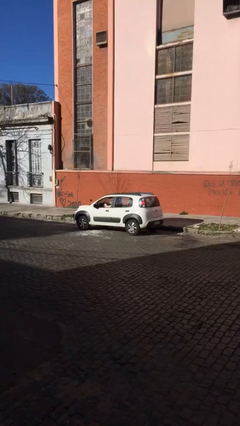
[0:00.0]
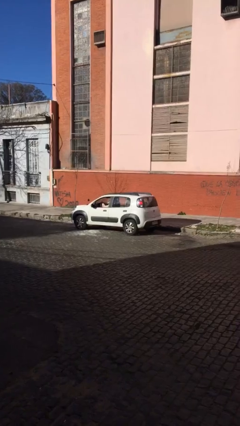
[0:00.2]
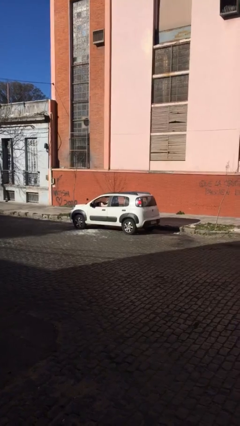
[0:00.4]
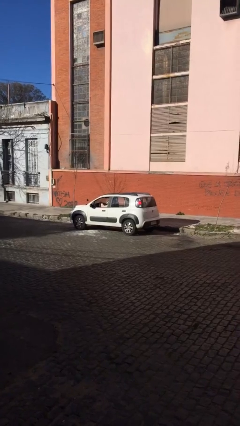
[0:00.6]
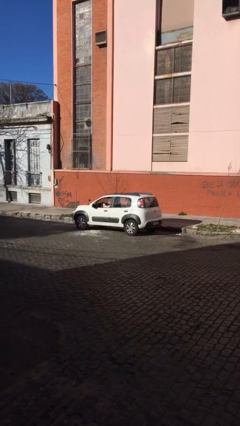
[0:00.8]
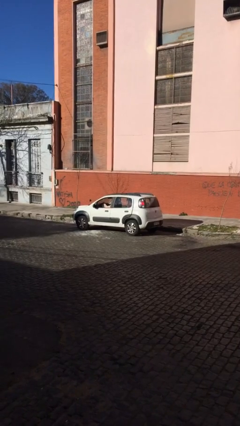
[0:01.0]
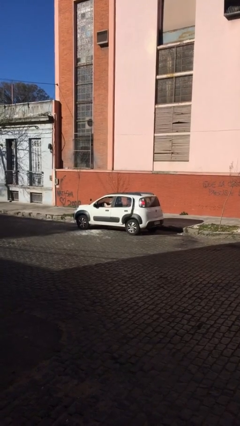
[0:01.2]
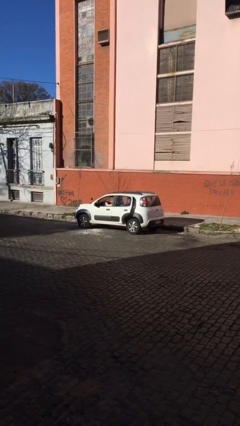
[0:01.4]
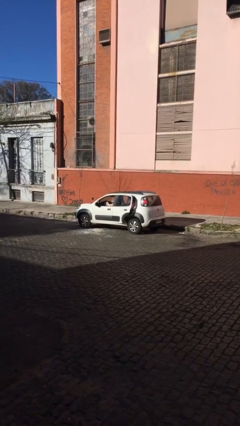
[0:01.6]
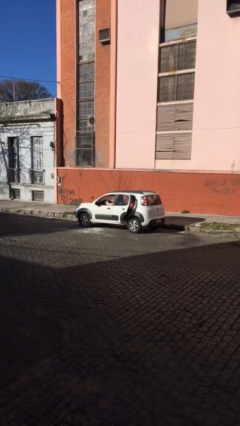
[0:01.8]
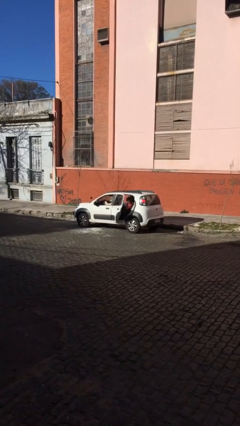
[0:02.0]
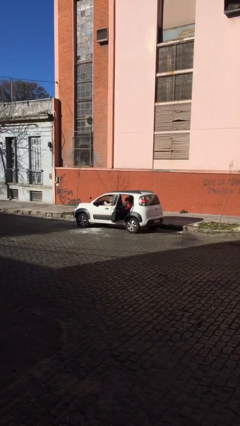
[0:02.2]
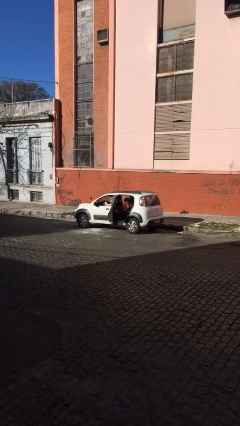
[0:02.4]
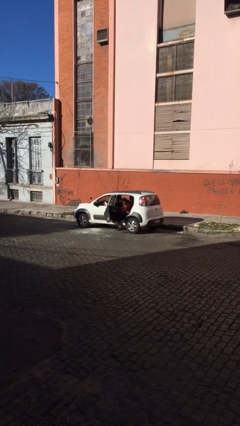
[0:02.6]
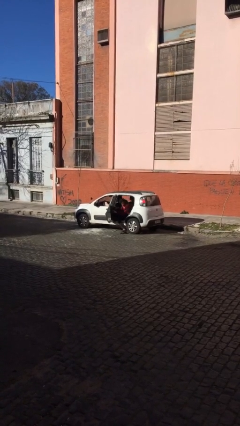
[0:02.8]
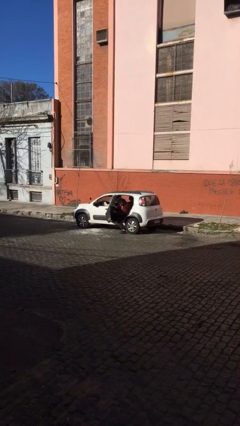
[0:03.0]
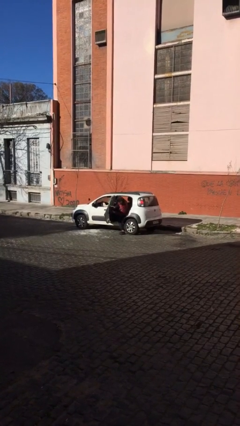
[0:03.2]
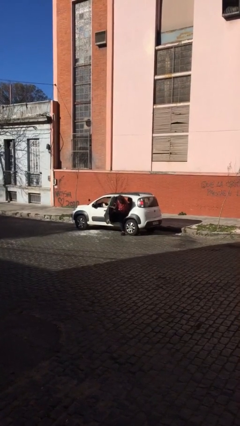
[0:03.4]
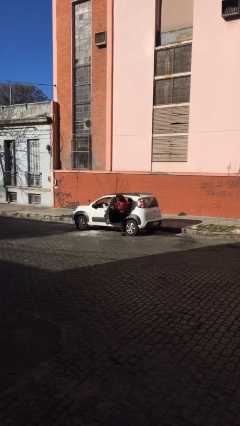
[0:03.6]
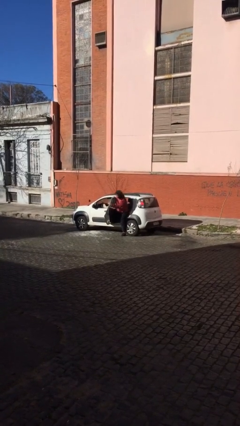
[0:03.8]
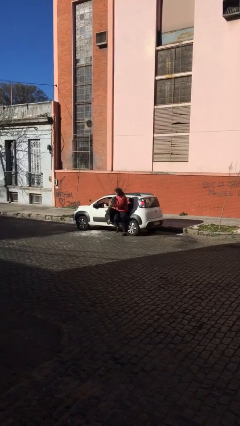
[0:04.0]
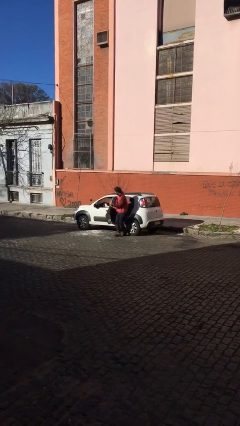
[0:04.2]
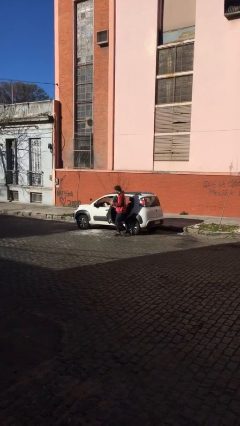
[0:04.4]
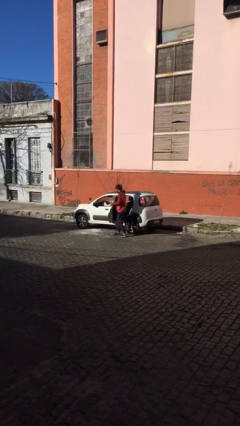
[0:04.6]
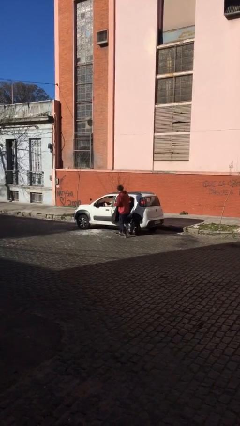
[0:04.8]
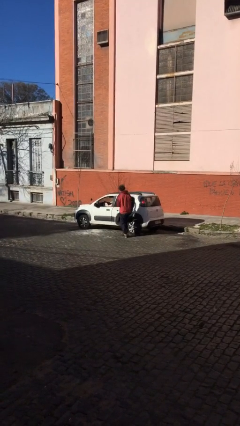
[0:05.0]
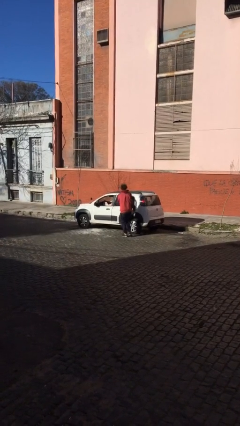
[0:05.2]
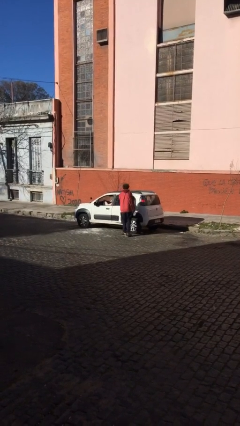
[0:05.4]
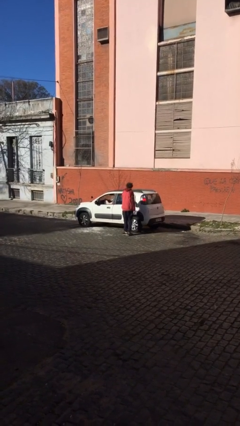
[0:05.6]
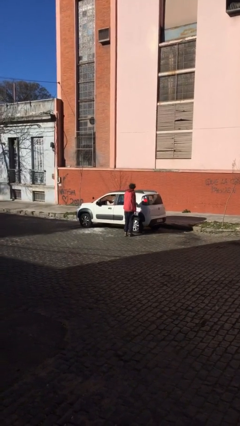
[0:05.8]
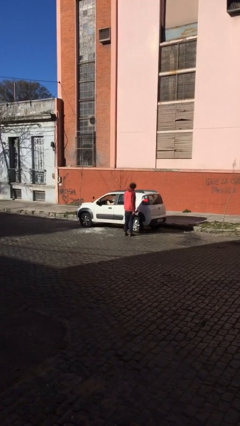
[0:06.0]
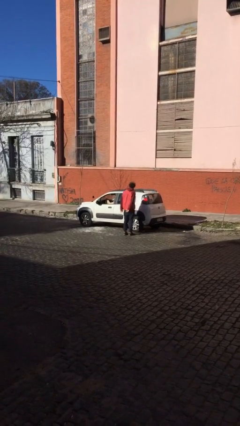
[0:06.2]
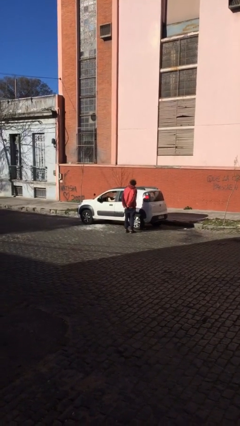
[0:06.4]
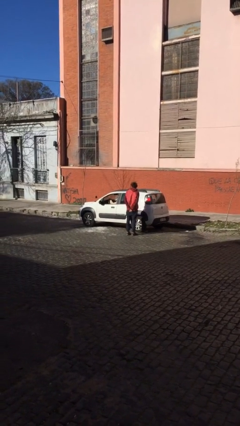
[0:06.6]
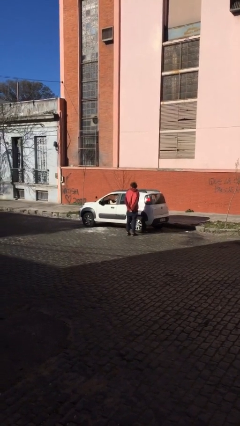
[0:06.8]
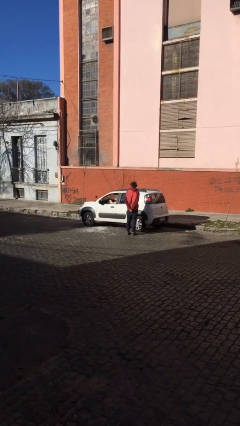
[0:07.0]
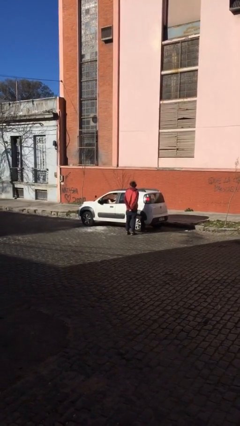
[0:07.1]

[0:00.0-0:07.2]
car drops off person

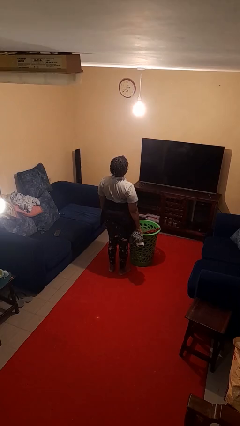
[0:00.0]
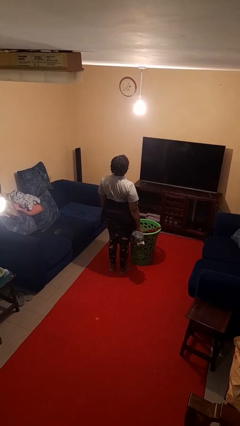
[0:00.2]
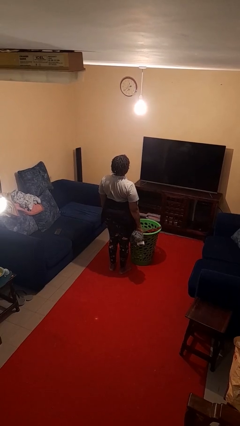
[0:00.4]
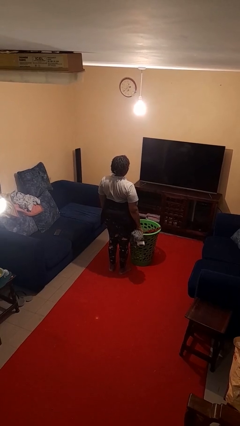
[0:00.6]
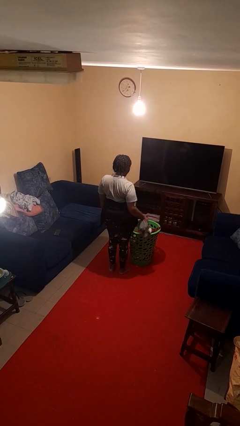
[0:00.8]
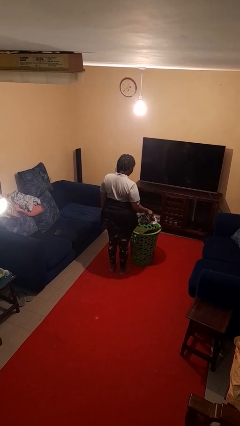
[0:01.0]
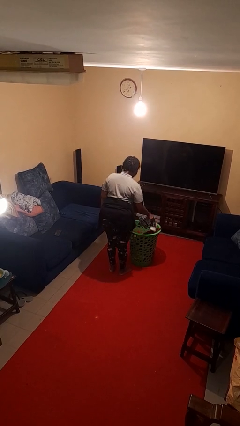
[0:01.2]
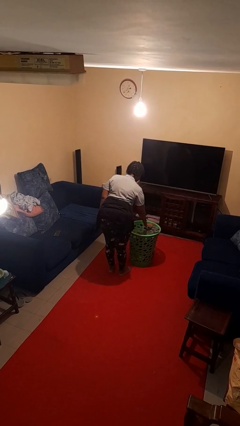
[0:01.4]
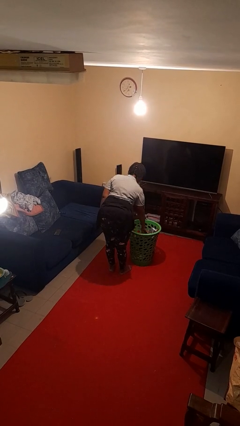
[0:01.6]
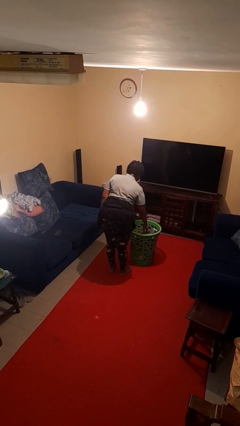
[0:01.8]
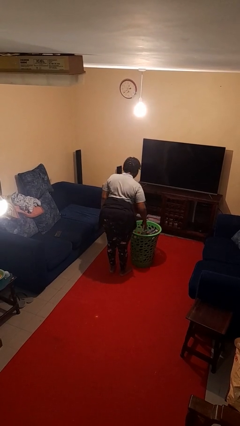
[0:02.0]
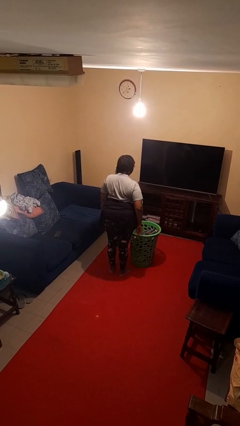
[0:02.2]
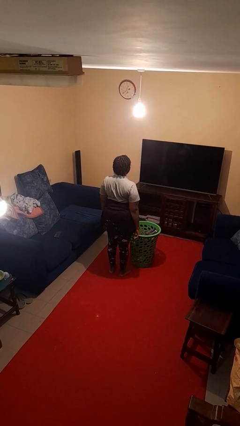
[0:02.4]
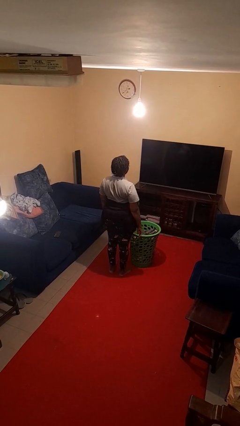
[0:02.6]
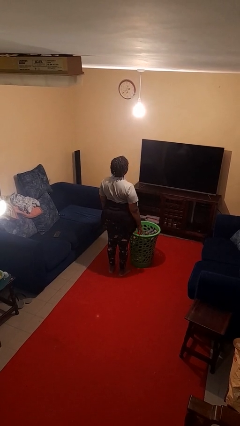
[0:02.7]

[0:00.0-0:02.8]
person puts object into basket

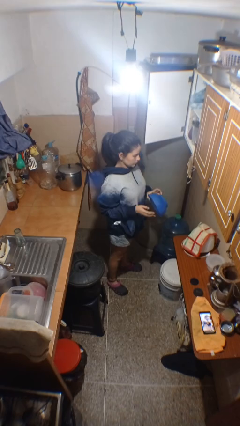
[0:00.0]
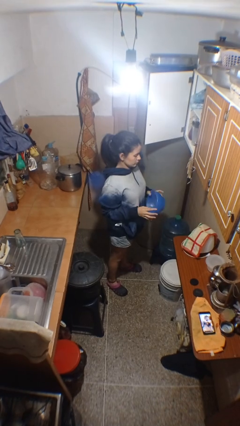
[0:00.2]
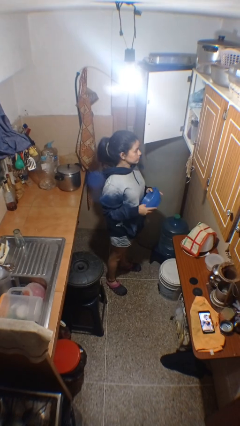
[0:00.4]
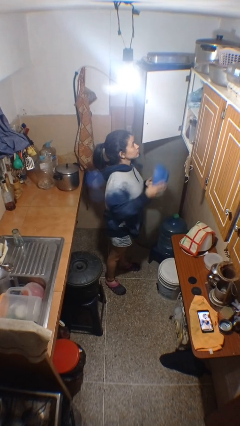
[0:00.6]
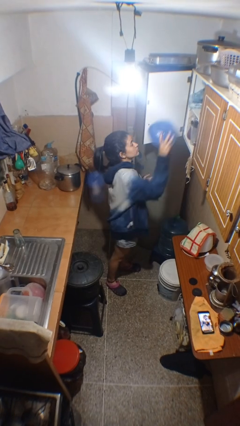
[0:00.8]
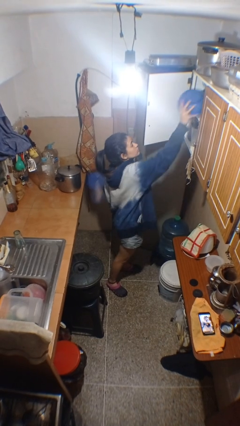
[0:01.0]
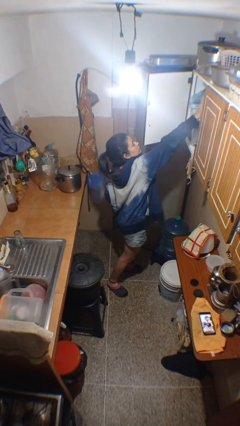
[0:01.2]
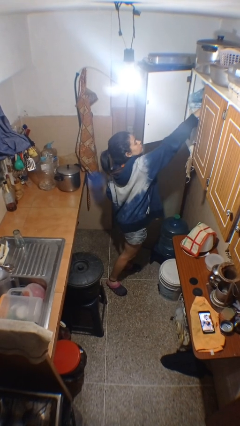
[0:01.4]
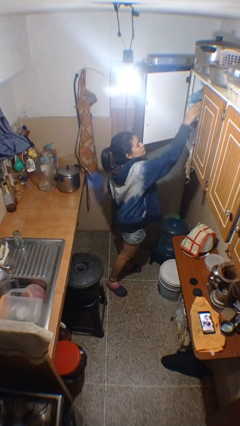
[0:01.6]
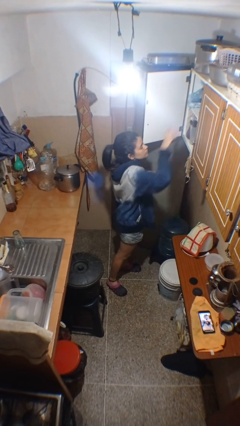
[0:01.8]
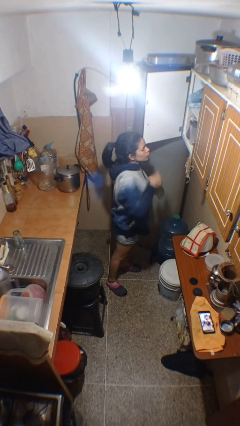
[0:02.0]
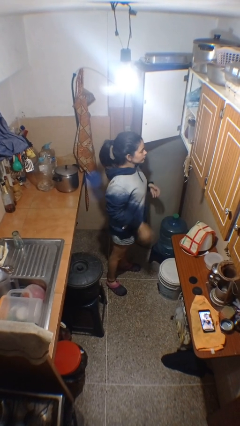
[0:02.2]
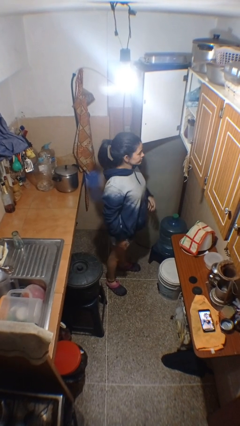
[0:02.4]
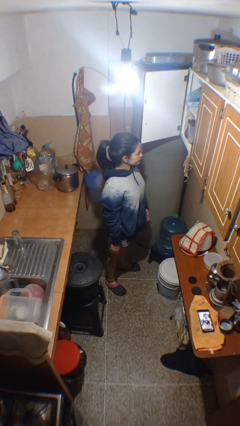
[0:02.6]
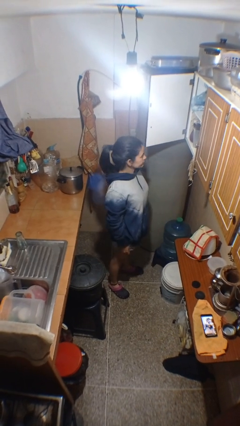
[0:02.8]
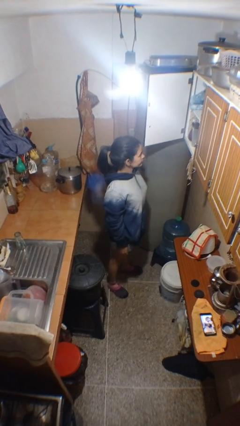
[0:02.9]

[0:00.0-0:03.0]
person puts down object into cabinet

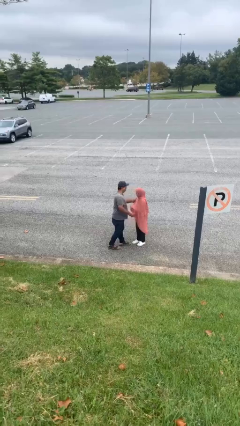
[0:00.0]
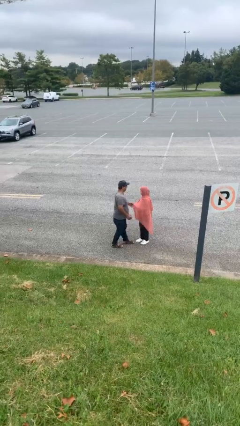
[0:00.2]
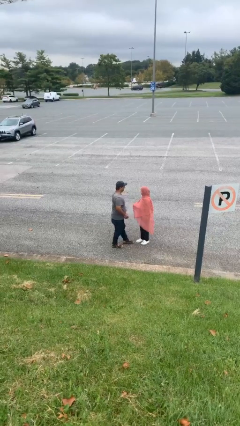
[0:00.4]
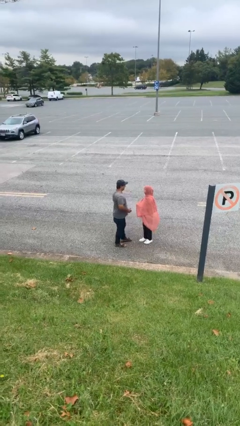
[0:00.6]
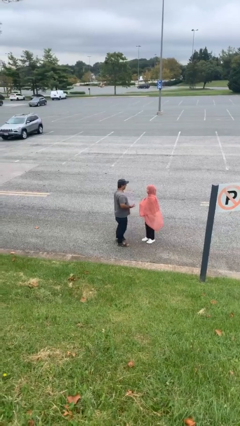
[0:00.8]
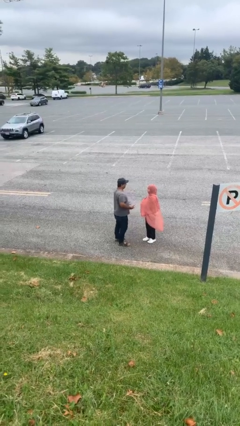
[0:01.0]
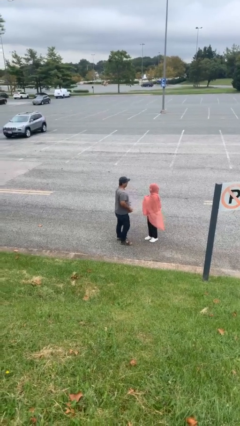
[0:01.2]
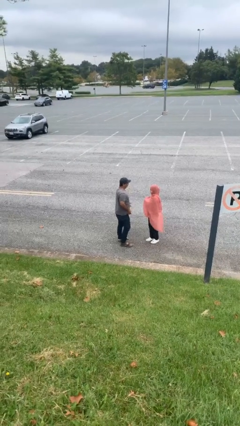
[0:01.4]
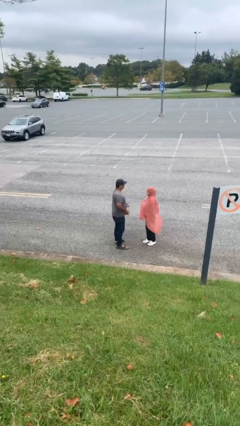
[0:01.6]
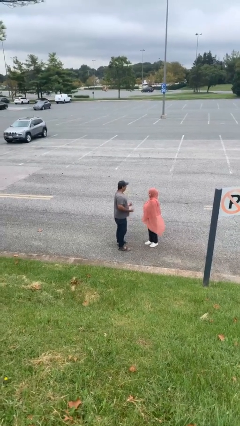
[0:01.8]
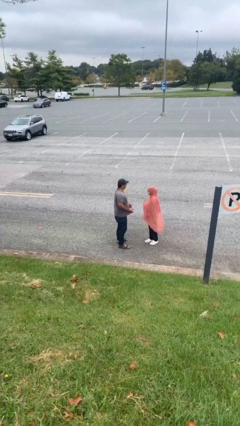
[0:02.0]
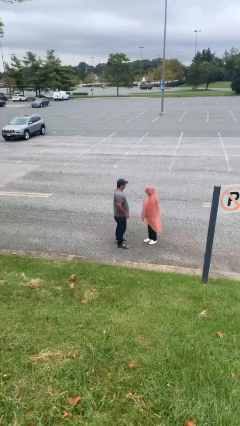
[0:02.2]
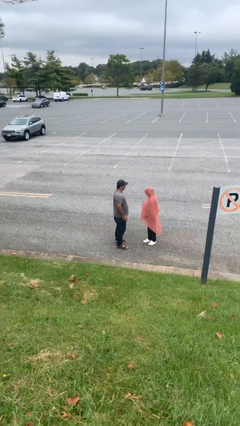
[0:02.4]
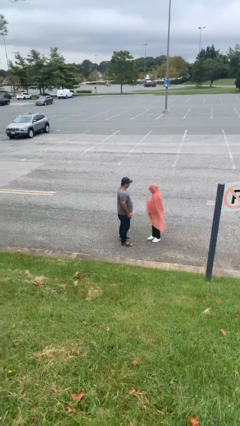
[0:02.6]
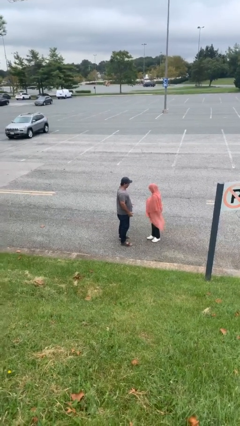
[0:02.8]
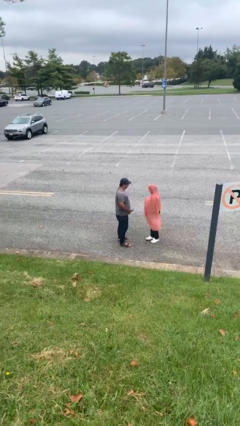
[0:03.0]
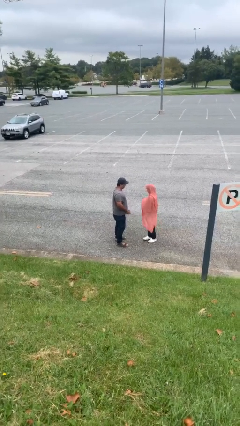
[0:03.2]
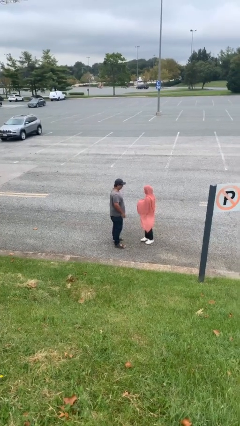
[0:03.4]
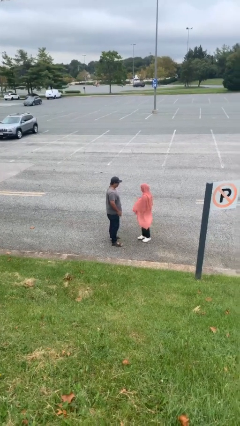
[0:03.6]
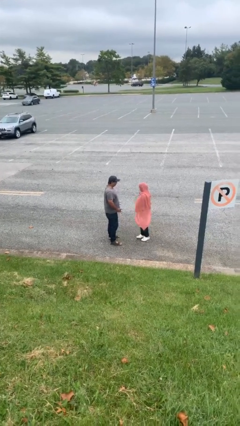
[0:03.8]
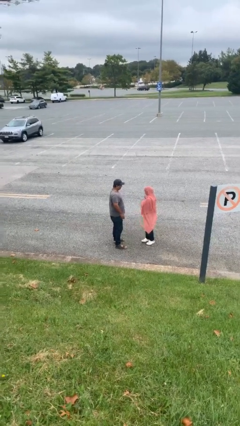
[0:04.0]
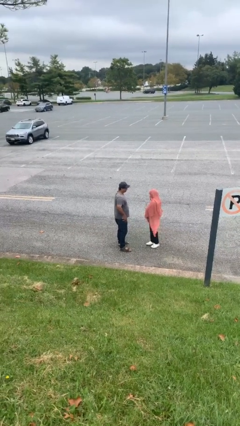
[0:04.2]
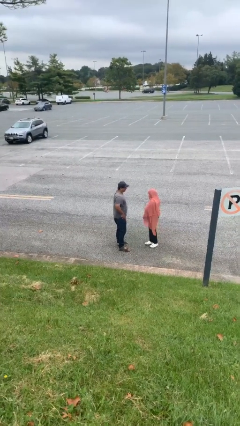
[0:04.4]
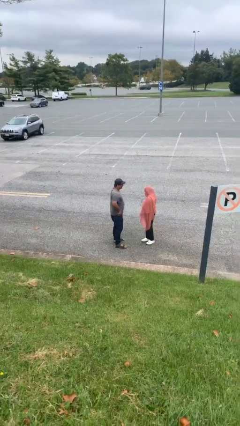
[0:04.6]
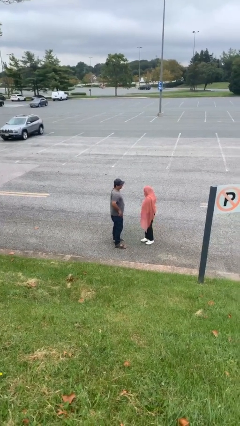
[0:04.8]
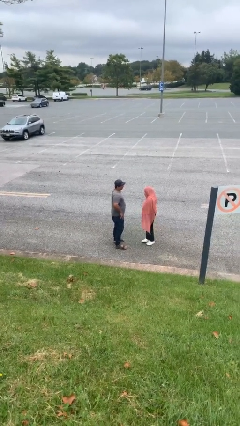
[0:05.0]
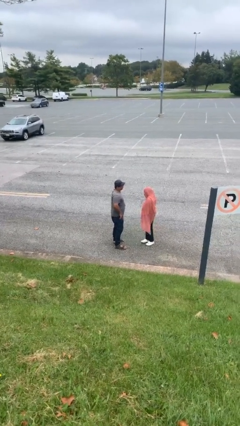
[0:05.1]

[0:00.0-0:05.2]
person talks to person
